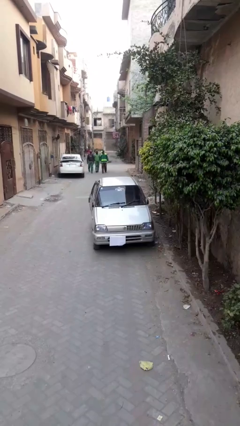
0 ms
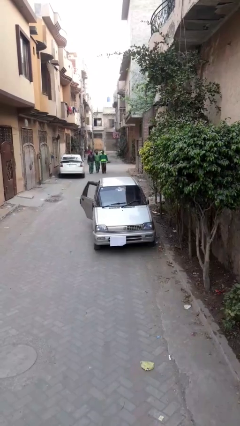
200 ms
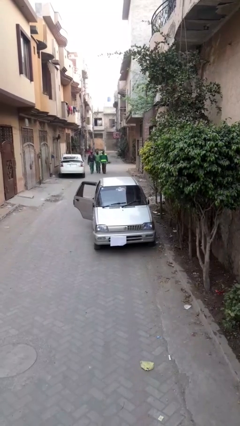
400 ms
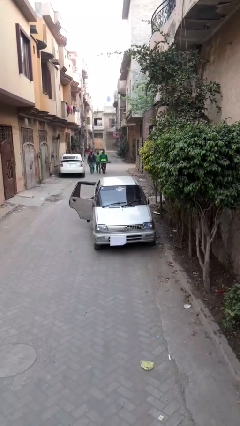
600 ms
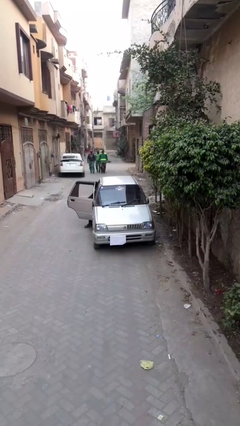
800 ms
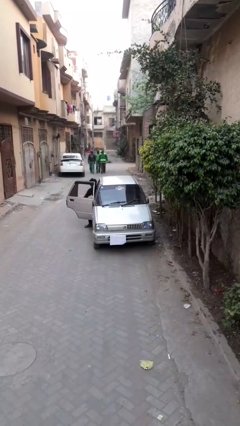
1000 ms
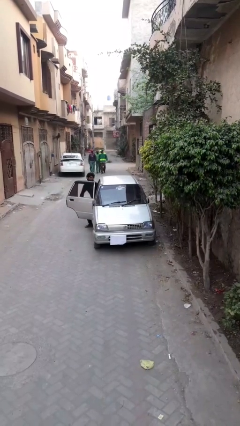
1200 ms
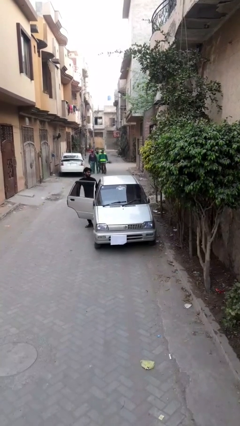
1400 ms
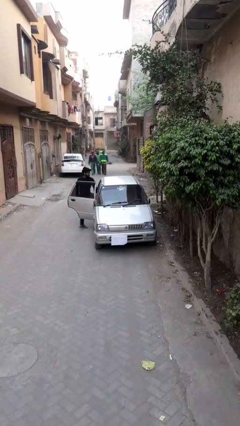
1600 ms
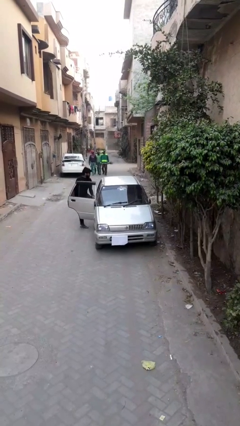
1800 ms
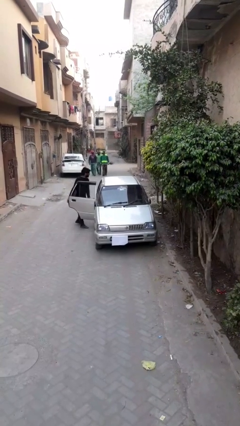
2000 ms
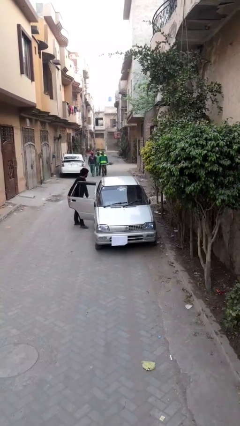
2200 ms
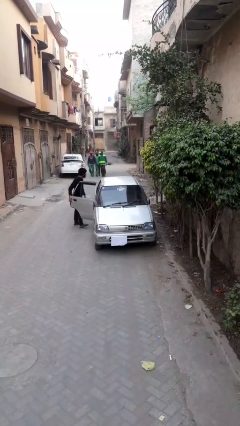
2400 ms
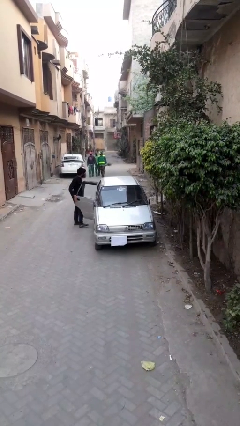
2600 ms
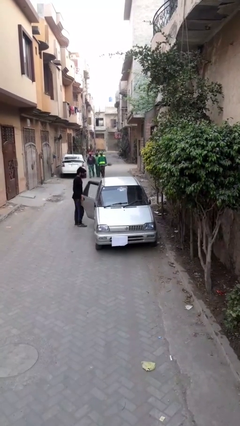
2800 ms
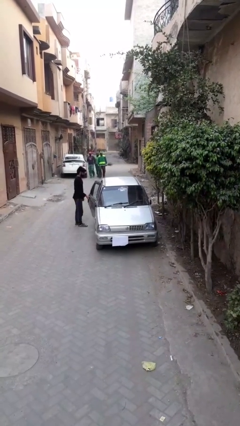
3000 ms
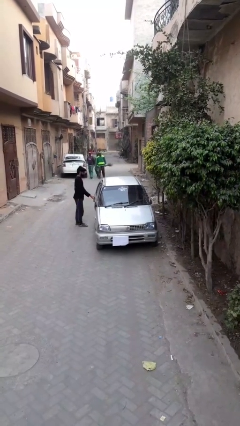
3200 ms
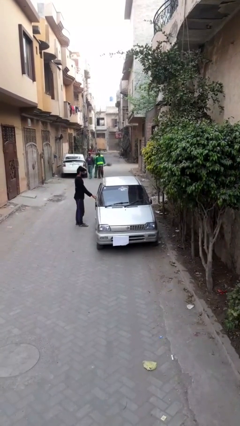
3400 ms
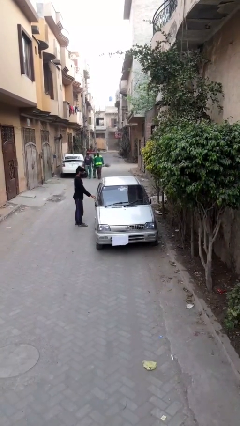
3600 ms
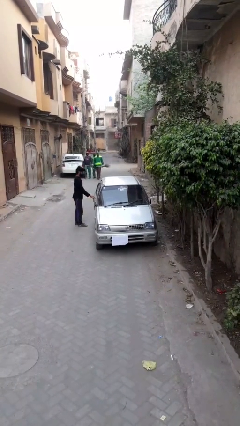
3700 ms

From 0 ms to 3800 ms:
car drops off person

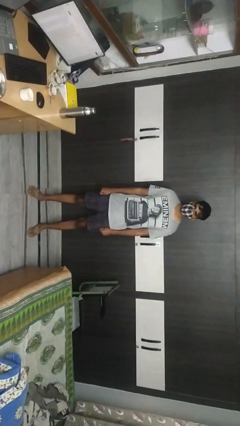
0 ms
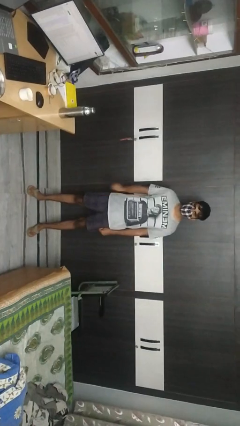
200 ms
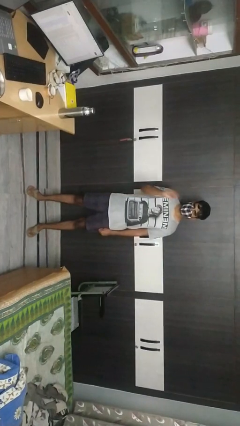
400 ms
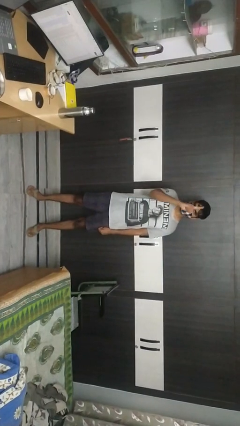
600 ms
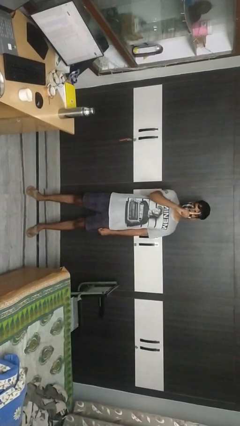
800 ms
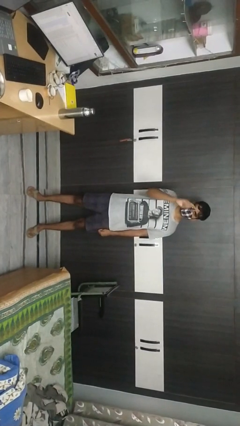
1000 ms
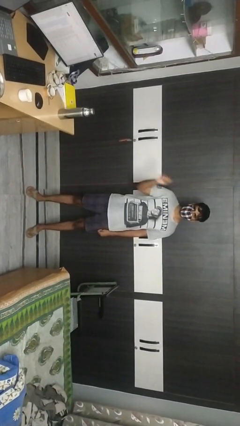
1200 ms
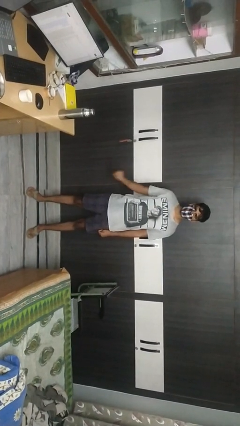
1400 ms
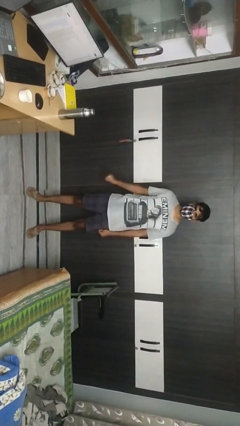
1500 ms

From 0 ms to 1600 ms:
person gestures number one

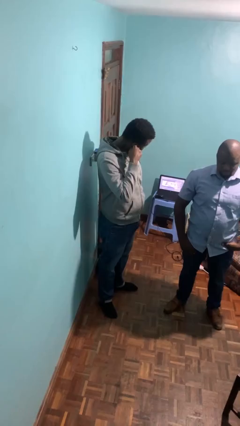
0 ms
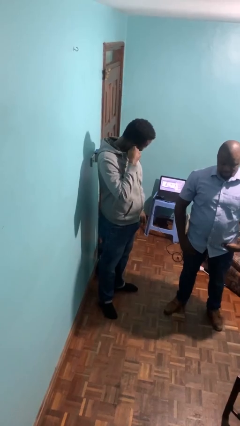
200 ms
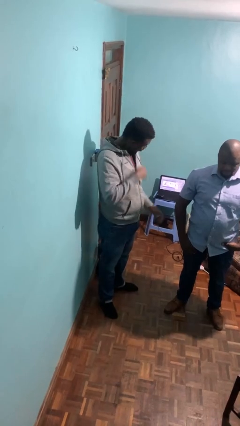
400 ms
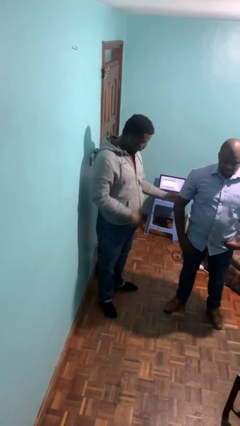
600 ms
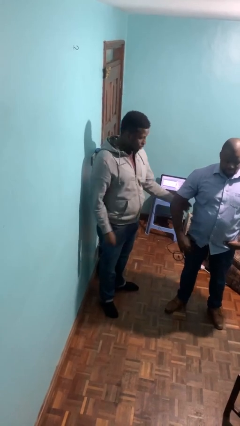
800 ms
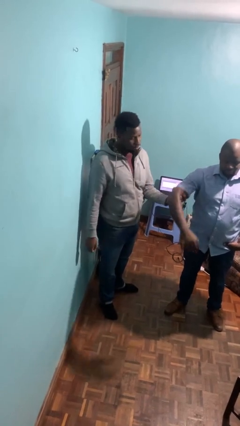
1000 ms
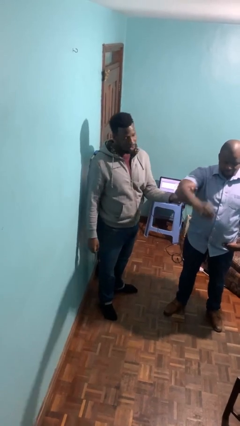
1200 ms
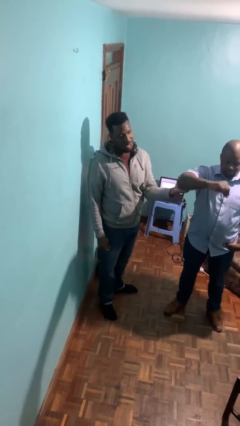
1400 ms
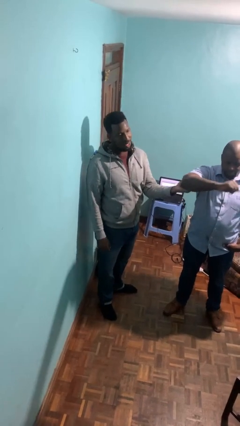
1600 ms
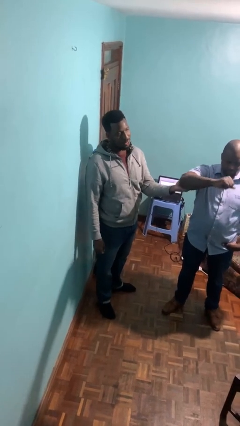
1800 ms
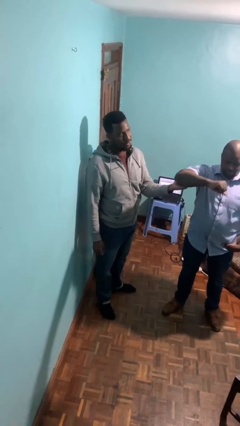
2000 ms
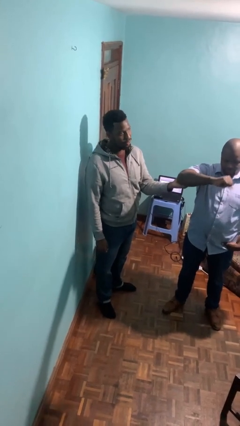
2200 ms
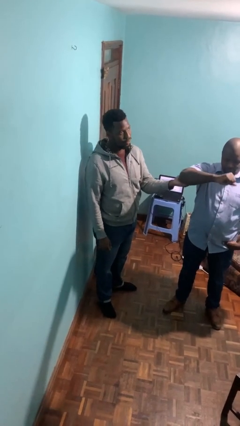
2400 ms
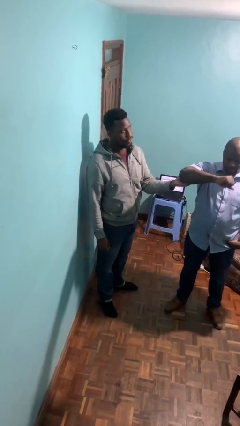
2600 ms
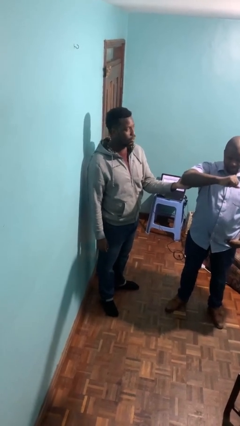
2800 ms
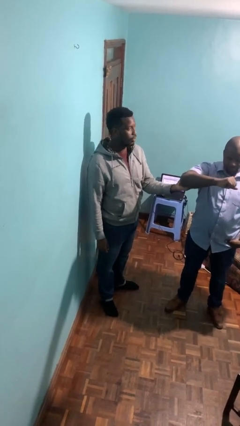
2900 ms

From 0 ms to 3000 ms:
person grabs person by bicep

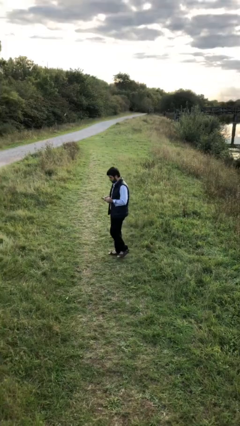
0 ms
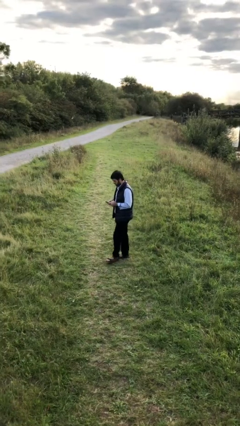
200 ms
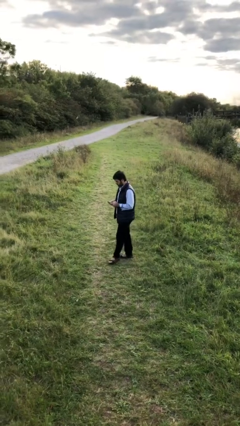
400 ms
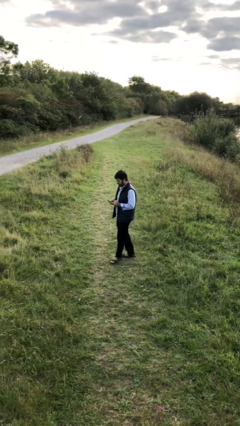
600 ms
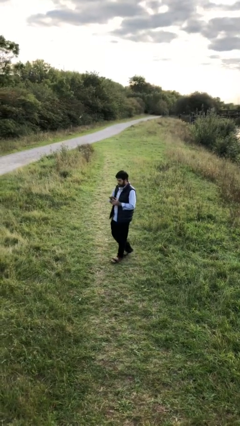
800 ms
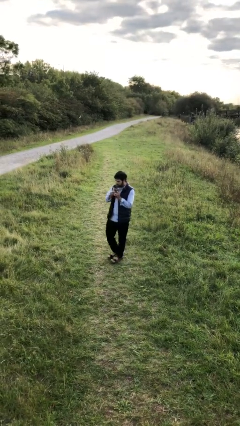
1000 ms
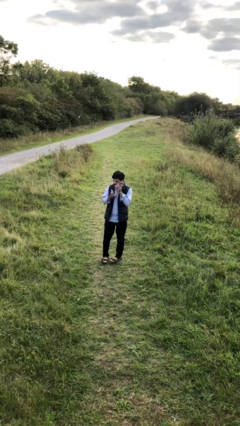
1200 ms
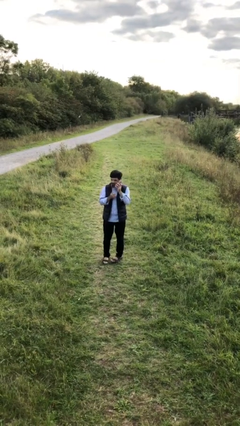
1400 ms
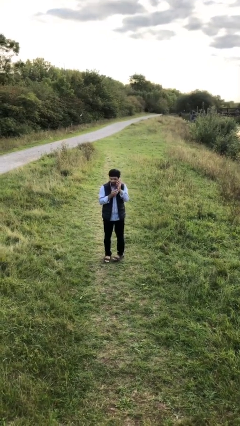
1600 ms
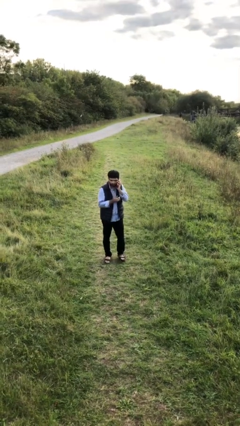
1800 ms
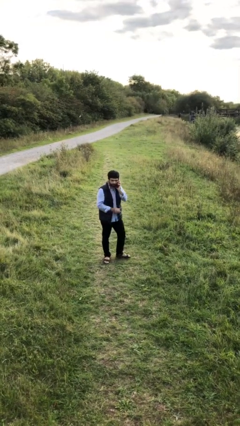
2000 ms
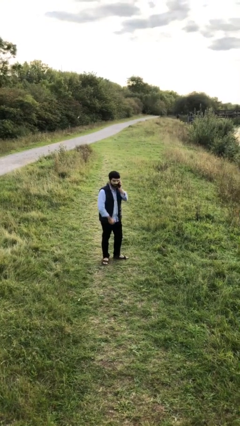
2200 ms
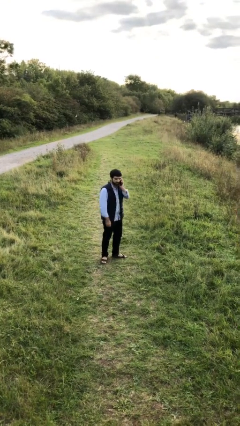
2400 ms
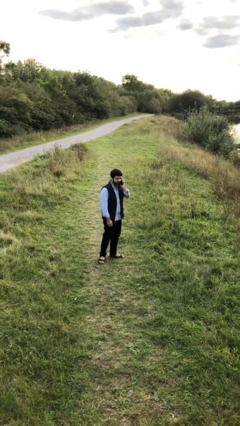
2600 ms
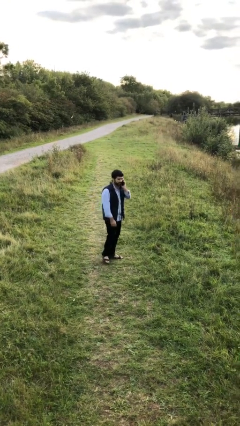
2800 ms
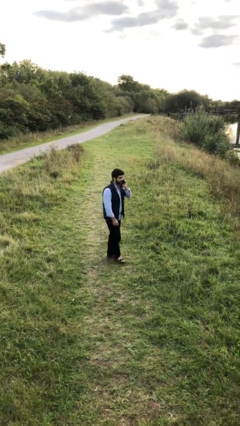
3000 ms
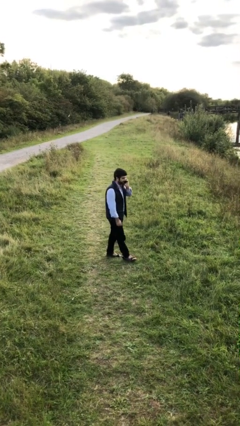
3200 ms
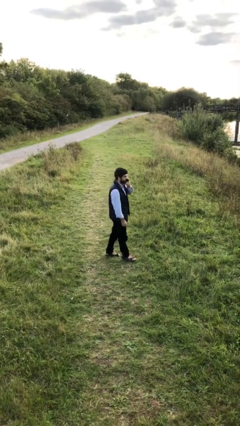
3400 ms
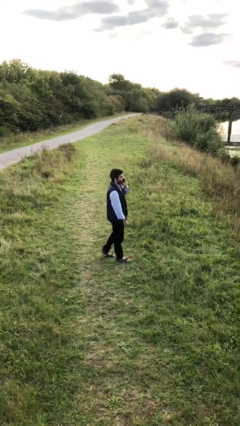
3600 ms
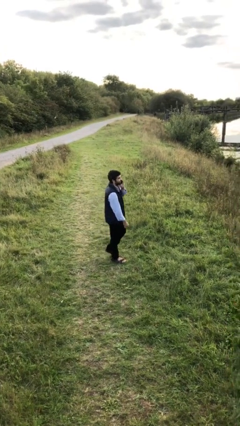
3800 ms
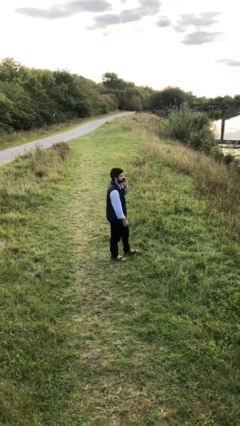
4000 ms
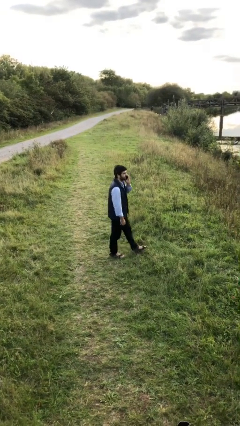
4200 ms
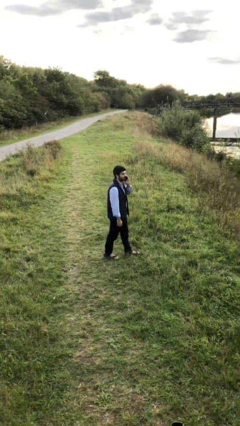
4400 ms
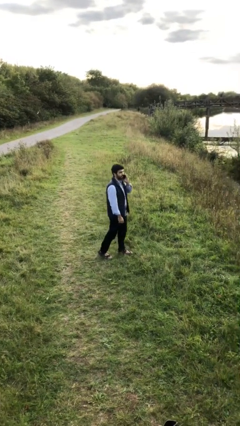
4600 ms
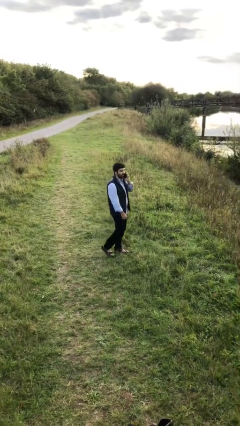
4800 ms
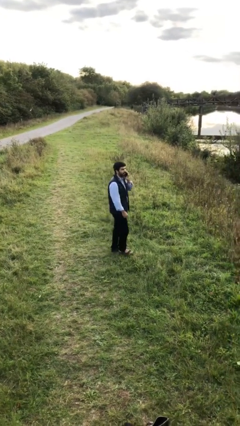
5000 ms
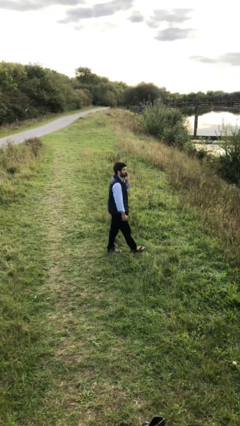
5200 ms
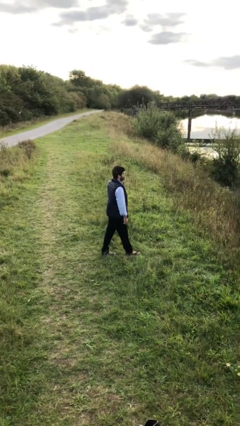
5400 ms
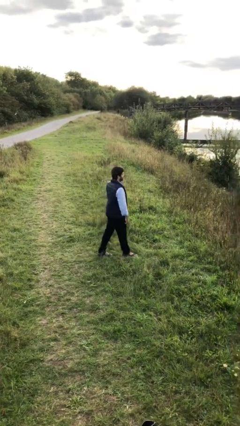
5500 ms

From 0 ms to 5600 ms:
person talks on phone

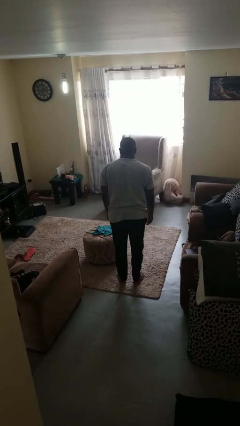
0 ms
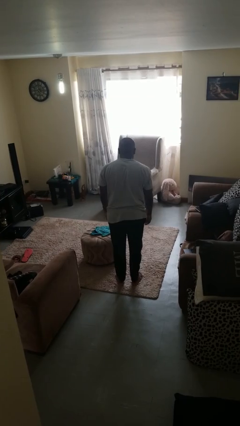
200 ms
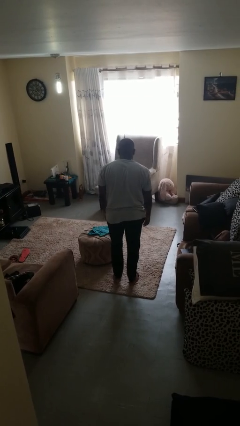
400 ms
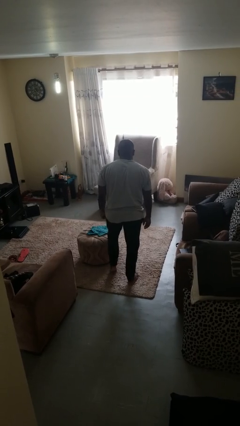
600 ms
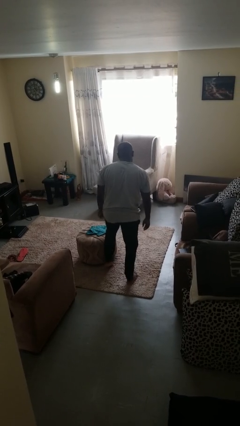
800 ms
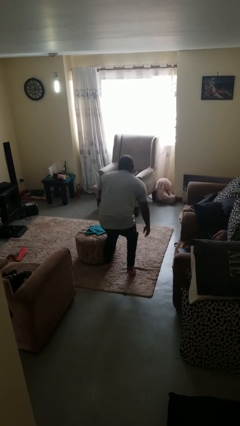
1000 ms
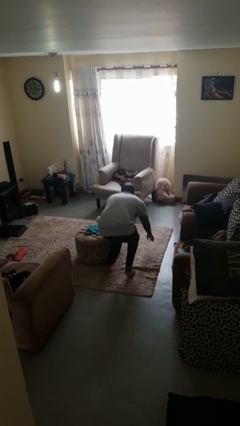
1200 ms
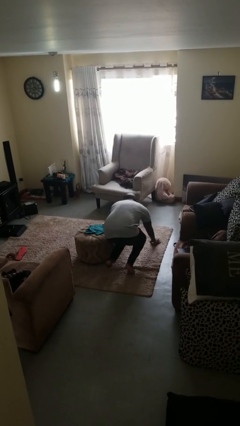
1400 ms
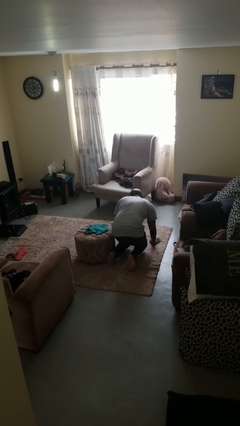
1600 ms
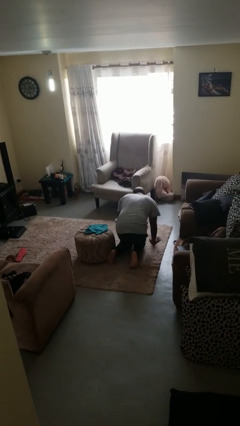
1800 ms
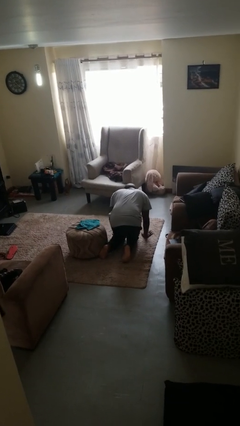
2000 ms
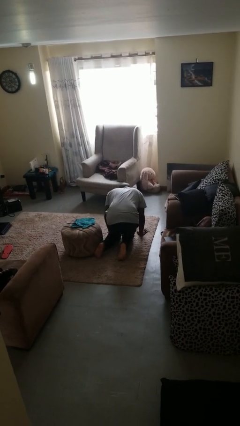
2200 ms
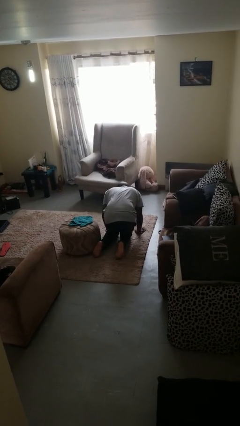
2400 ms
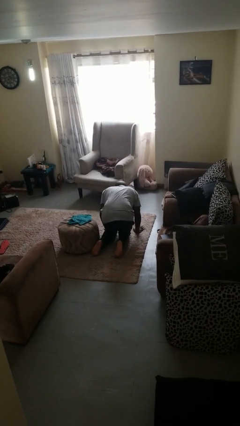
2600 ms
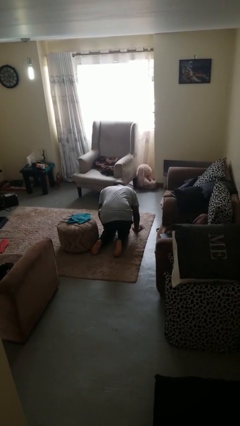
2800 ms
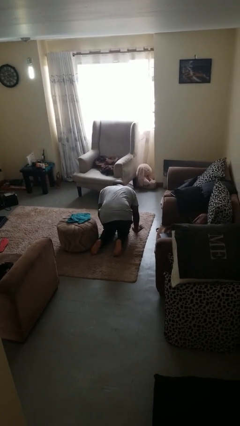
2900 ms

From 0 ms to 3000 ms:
person trips on object on floor

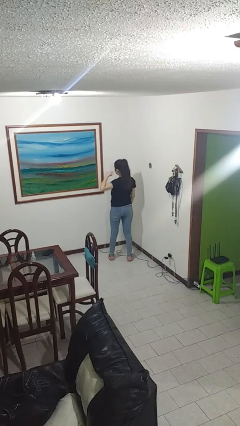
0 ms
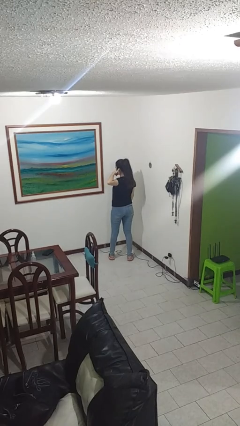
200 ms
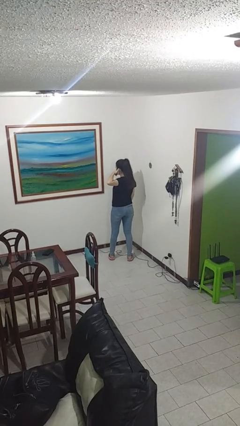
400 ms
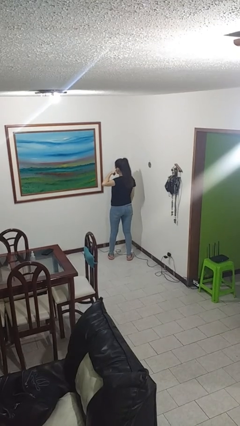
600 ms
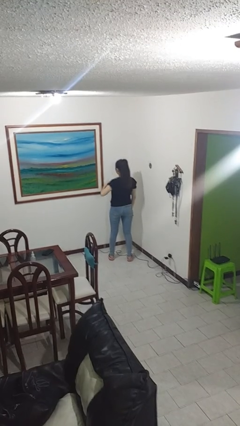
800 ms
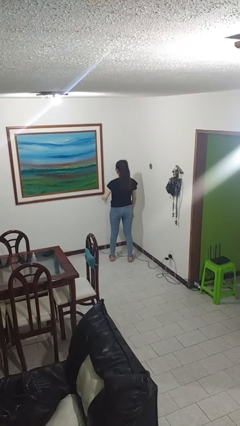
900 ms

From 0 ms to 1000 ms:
person gestures call me
